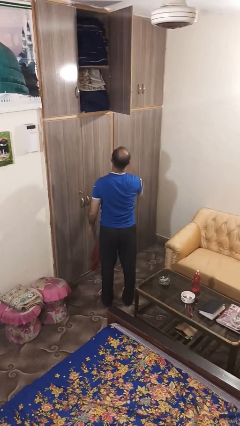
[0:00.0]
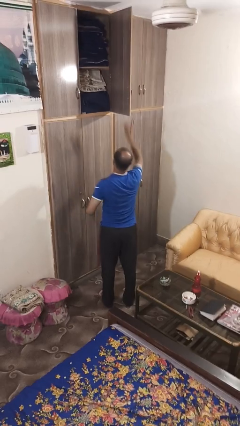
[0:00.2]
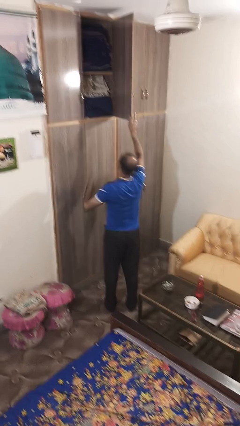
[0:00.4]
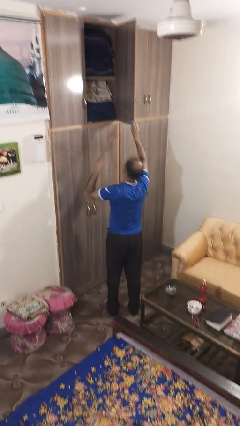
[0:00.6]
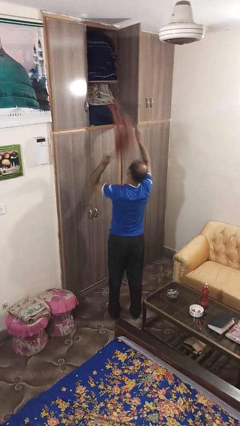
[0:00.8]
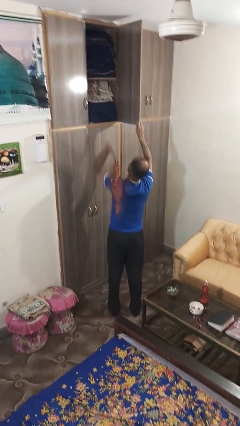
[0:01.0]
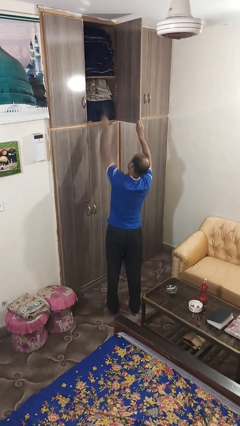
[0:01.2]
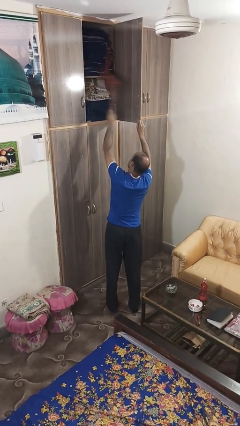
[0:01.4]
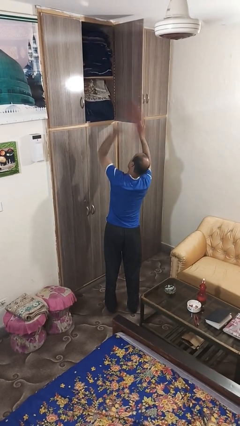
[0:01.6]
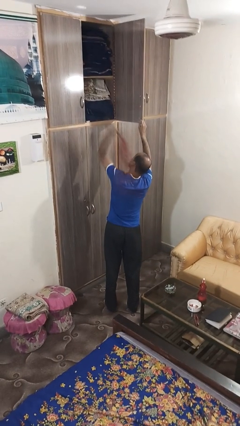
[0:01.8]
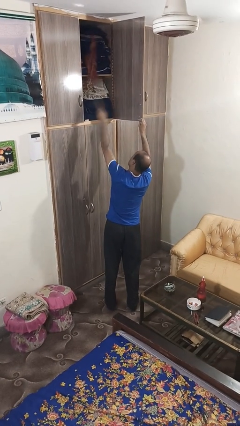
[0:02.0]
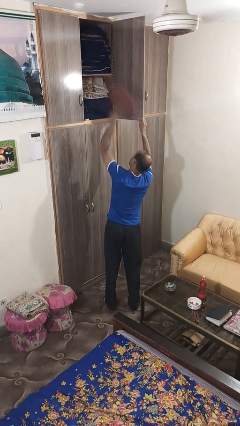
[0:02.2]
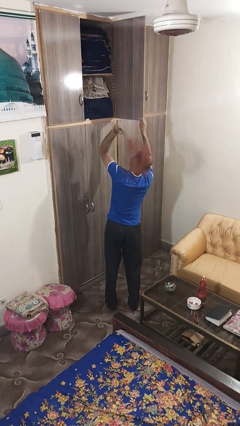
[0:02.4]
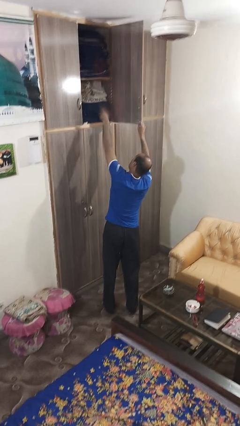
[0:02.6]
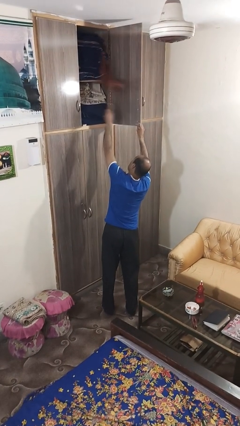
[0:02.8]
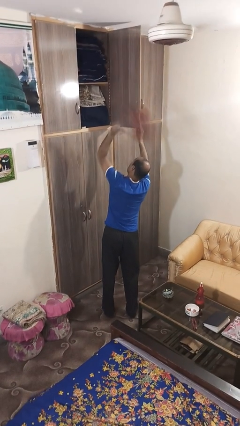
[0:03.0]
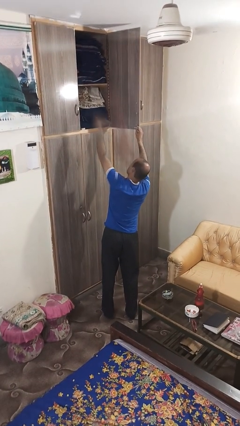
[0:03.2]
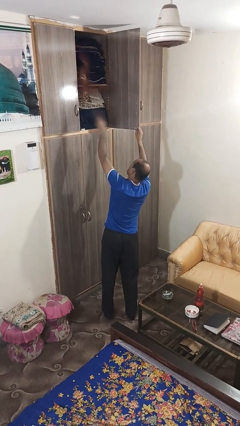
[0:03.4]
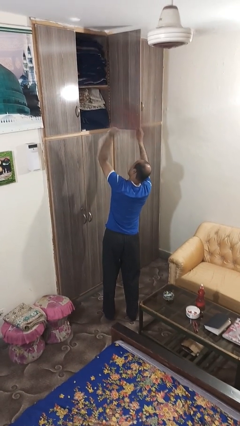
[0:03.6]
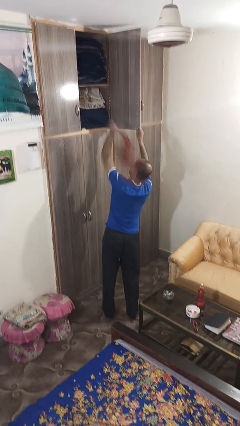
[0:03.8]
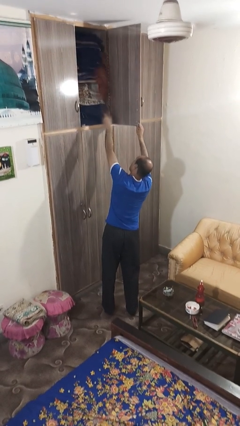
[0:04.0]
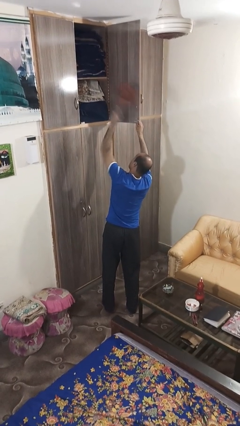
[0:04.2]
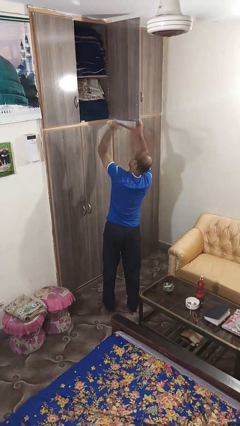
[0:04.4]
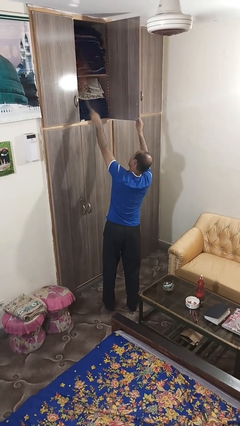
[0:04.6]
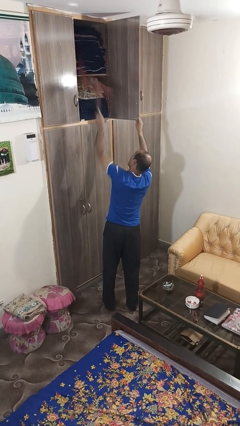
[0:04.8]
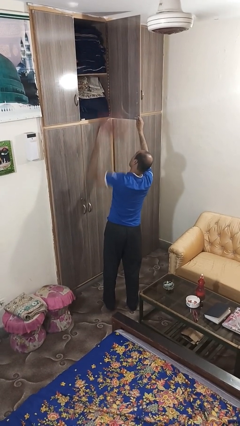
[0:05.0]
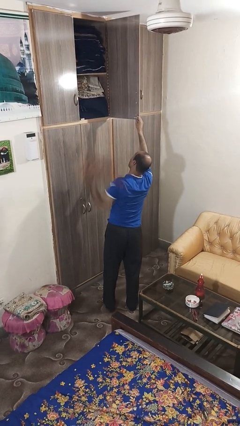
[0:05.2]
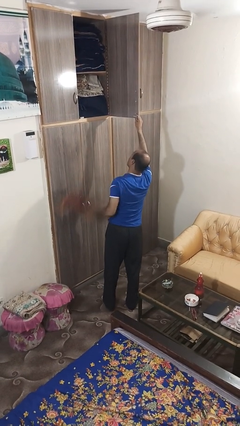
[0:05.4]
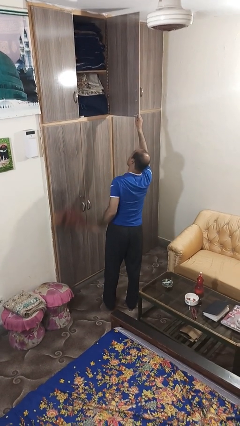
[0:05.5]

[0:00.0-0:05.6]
person dusts furniture

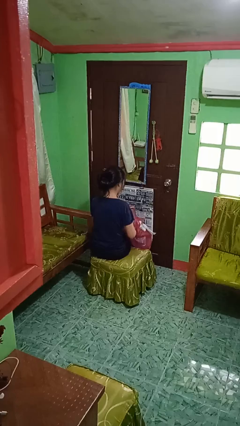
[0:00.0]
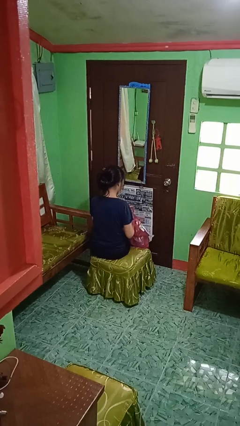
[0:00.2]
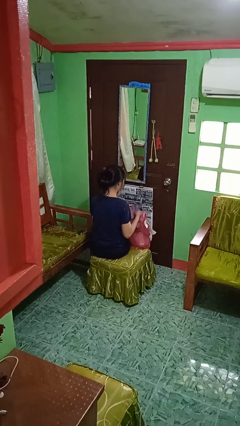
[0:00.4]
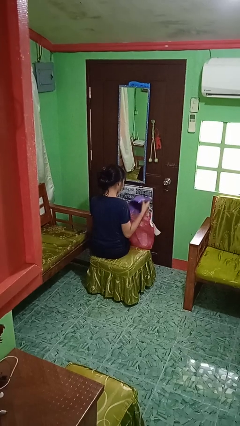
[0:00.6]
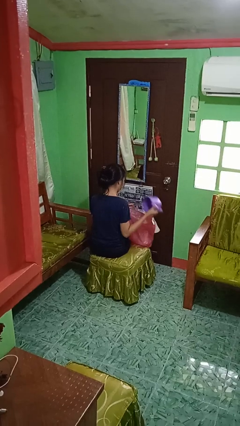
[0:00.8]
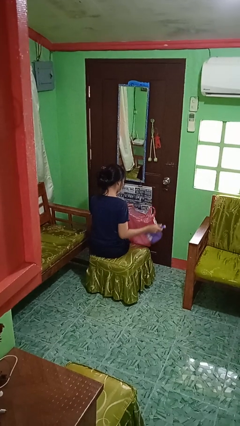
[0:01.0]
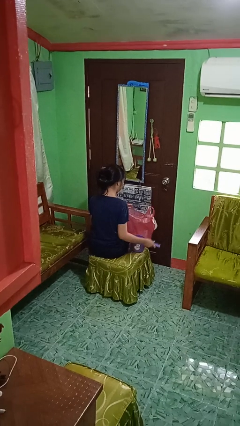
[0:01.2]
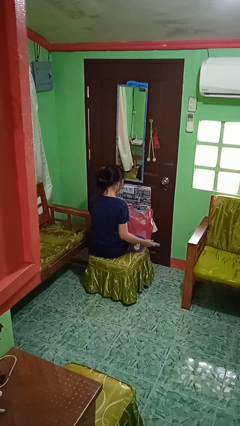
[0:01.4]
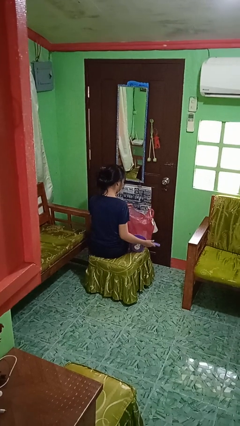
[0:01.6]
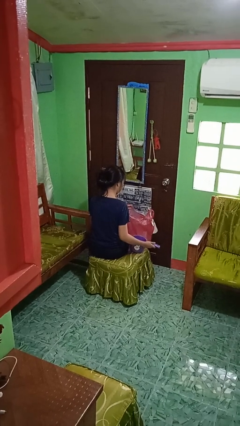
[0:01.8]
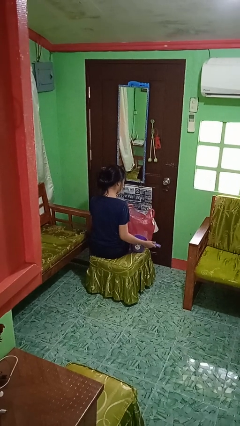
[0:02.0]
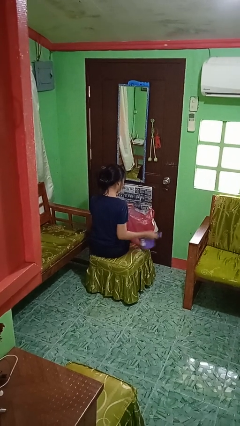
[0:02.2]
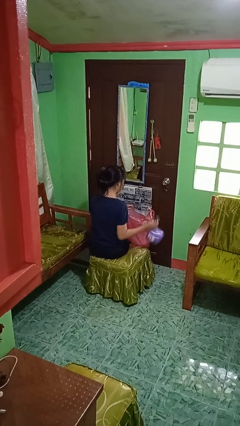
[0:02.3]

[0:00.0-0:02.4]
person takes object from bag

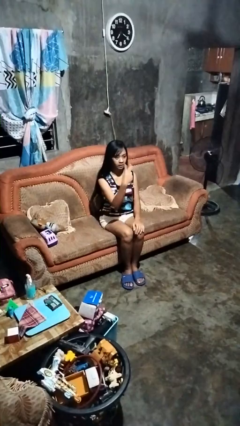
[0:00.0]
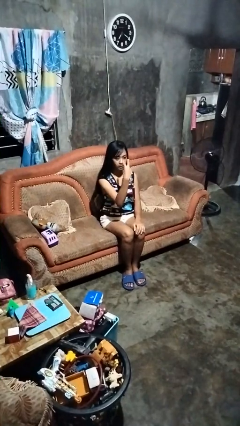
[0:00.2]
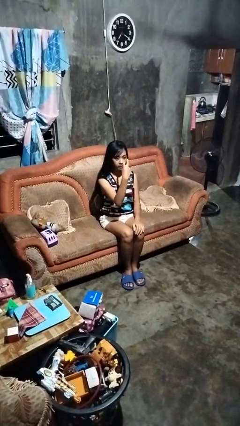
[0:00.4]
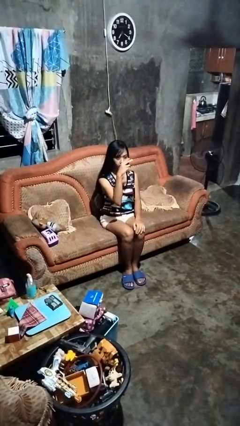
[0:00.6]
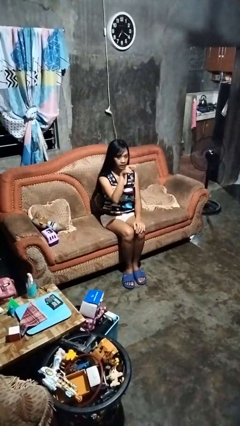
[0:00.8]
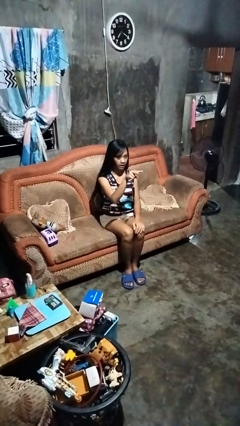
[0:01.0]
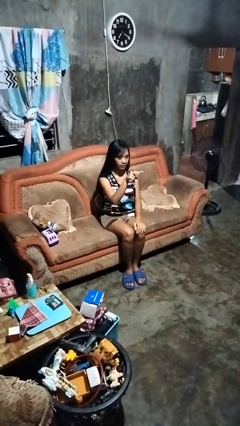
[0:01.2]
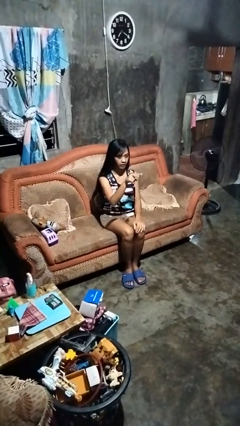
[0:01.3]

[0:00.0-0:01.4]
person gestures watch closely

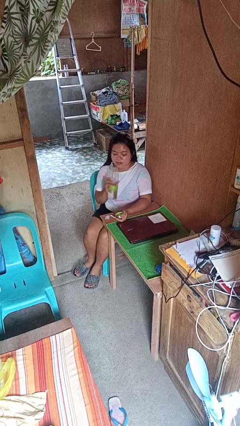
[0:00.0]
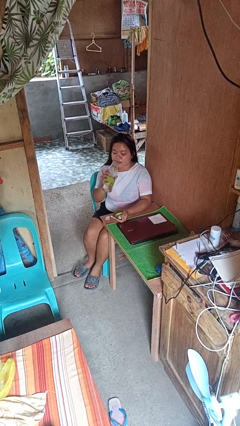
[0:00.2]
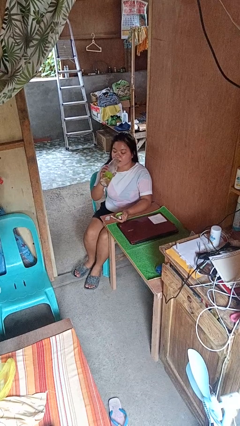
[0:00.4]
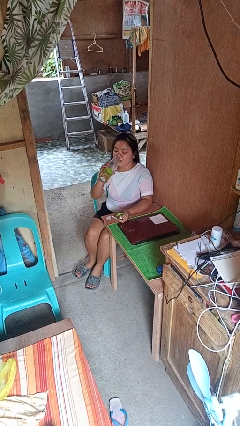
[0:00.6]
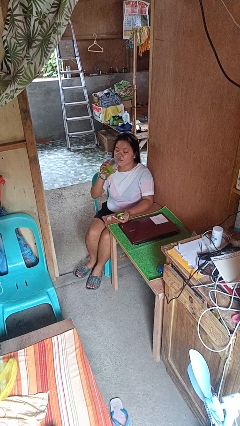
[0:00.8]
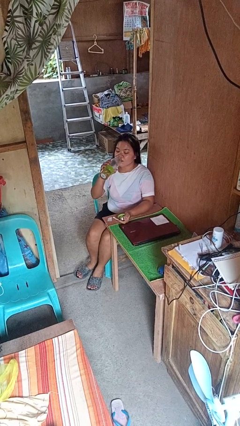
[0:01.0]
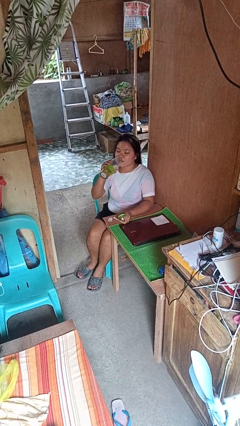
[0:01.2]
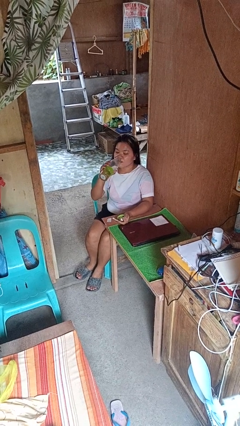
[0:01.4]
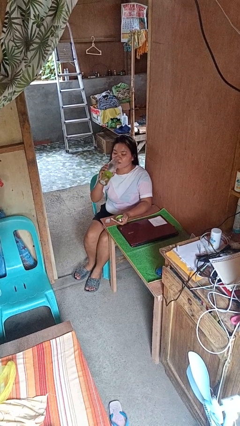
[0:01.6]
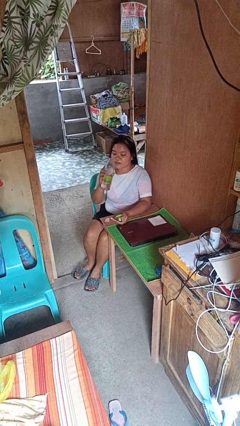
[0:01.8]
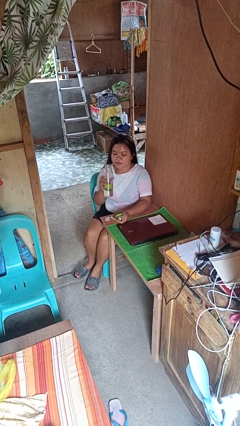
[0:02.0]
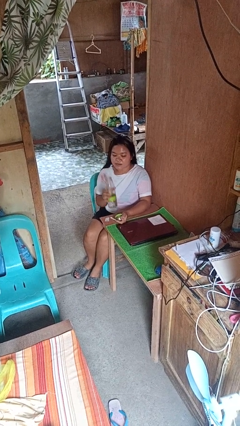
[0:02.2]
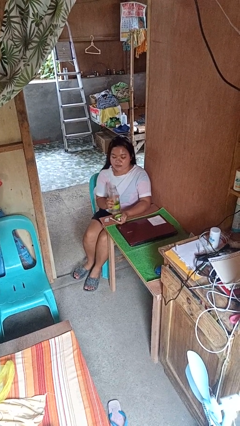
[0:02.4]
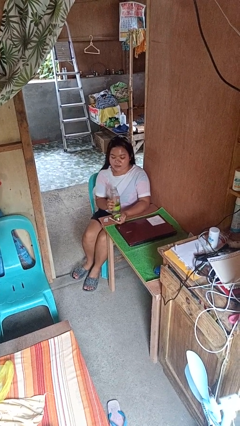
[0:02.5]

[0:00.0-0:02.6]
person drinks from bottle

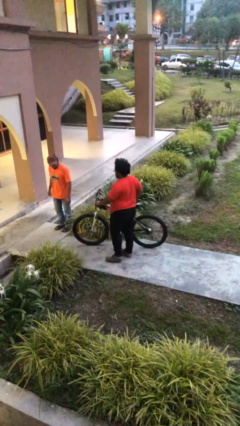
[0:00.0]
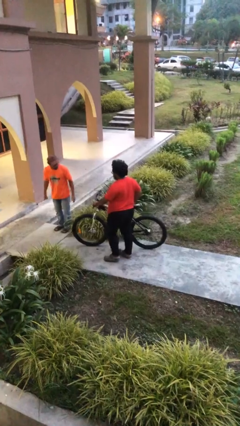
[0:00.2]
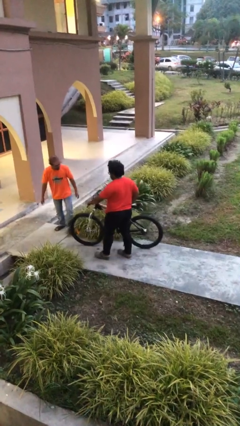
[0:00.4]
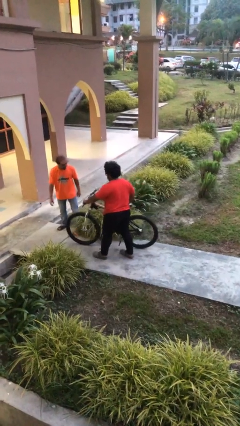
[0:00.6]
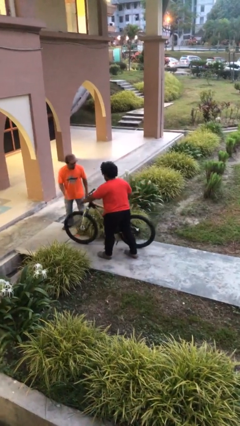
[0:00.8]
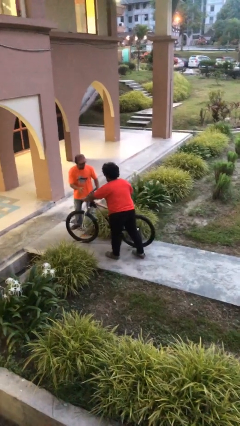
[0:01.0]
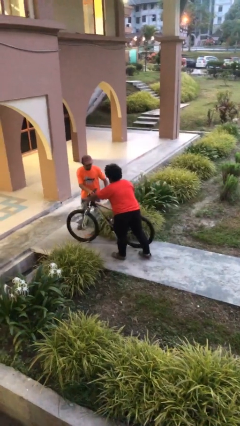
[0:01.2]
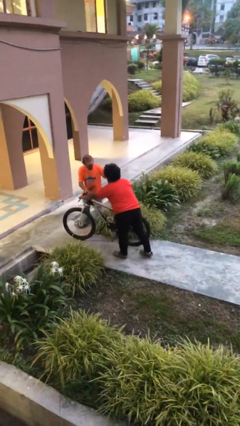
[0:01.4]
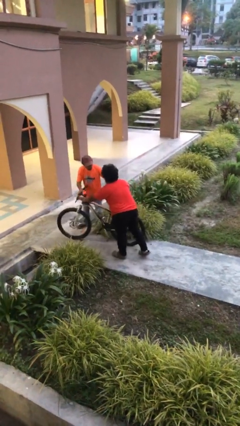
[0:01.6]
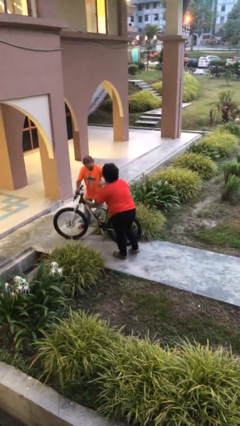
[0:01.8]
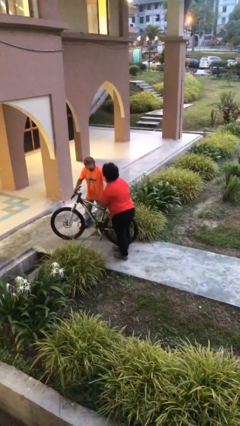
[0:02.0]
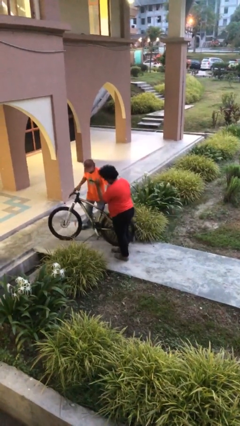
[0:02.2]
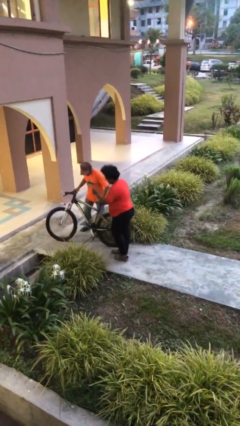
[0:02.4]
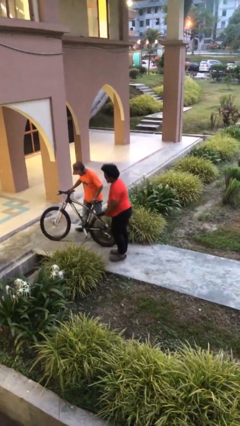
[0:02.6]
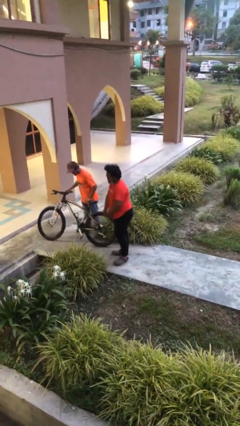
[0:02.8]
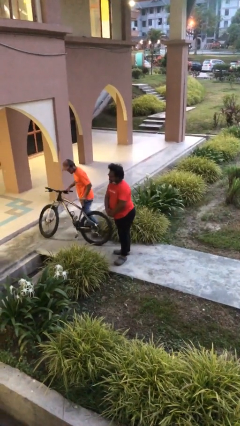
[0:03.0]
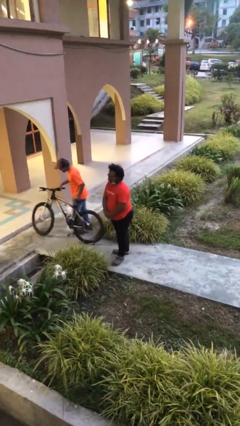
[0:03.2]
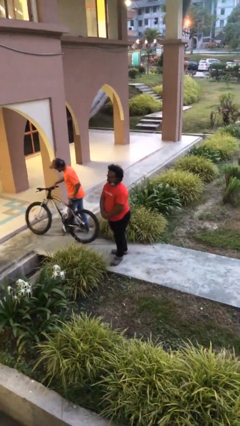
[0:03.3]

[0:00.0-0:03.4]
person transfers object to person

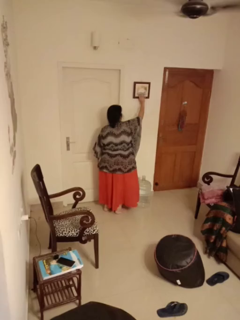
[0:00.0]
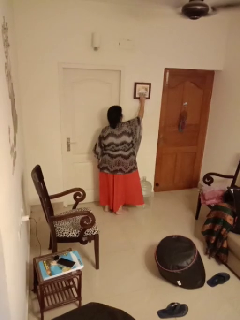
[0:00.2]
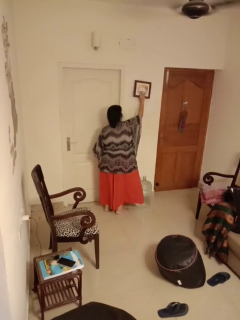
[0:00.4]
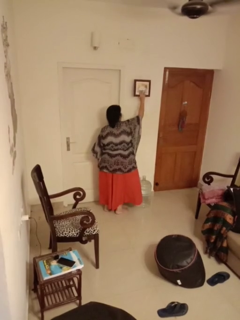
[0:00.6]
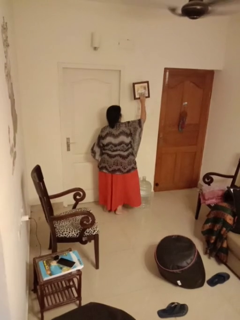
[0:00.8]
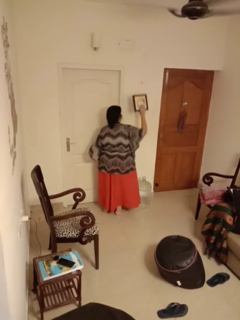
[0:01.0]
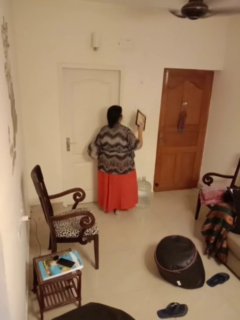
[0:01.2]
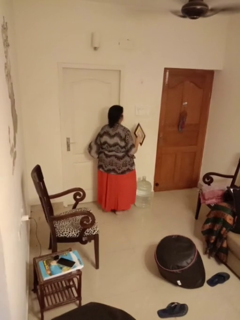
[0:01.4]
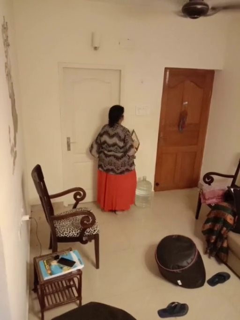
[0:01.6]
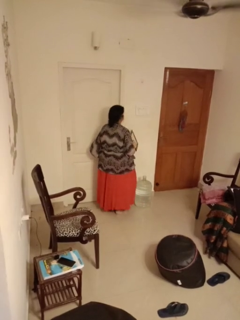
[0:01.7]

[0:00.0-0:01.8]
person takes down picture frame

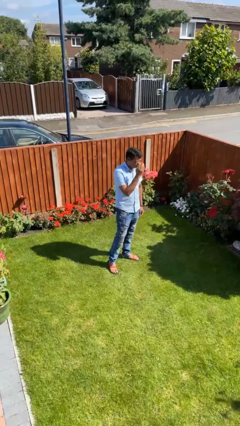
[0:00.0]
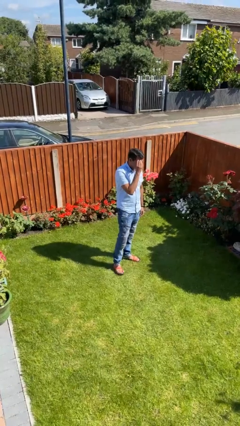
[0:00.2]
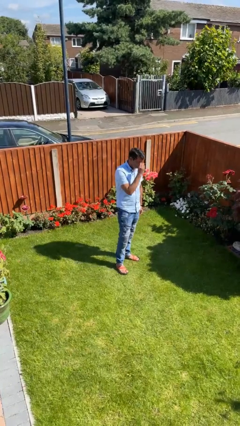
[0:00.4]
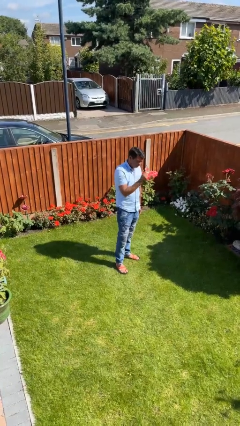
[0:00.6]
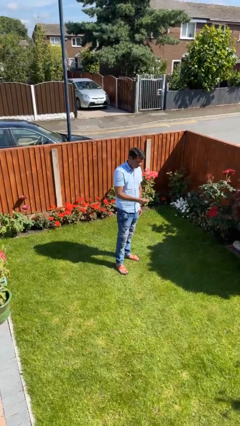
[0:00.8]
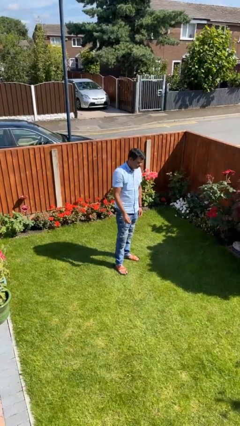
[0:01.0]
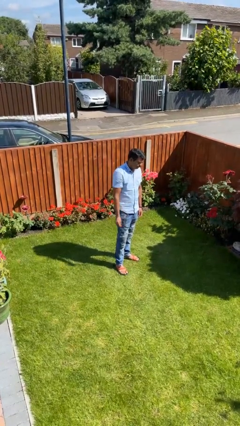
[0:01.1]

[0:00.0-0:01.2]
person takes off glasses
